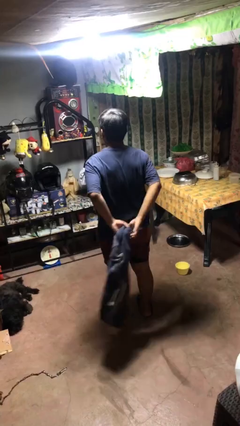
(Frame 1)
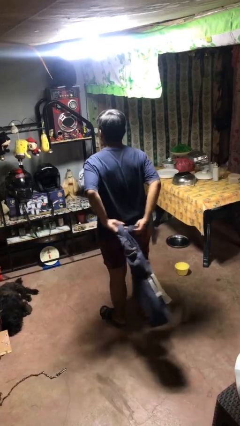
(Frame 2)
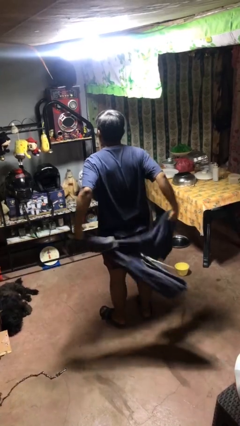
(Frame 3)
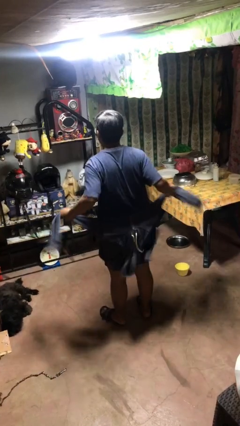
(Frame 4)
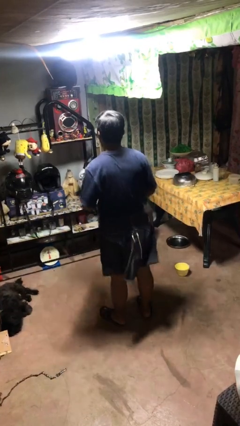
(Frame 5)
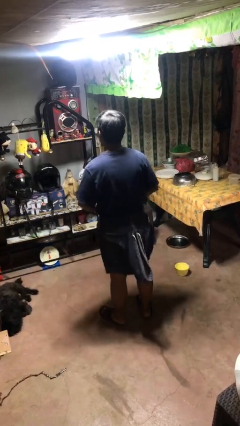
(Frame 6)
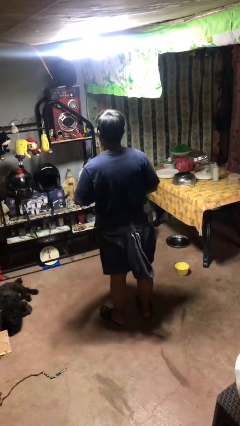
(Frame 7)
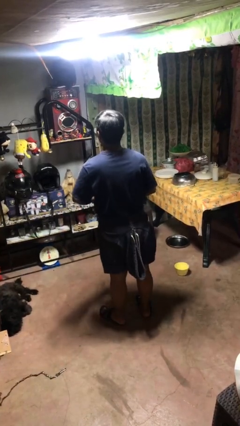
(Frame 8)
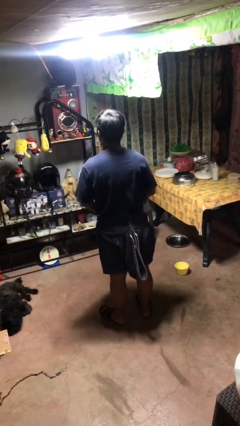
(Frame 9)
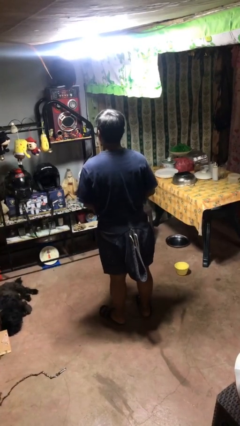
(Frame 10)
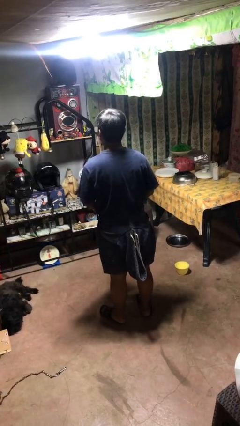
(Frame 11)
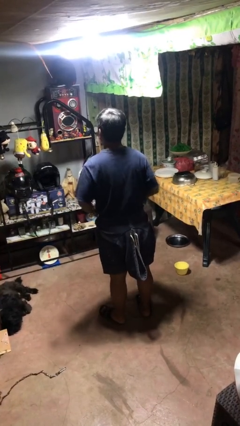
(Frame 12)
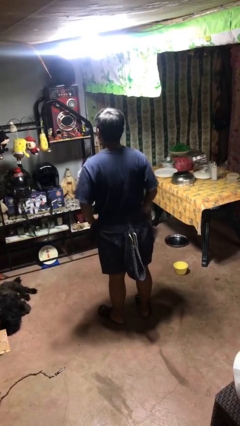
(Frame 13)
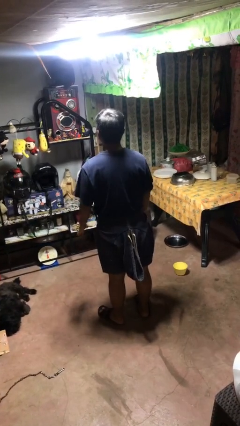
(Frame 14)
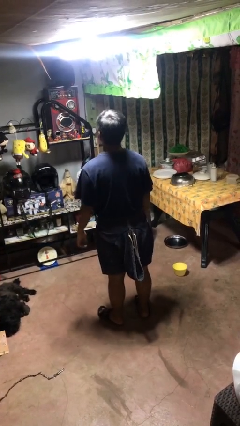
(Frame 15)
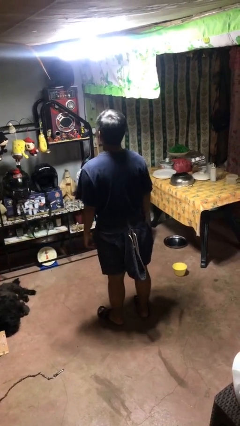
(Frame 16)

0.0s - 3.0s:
person ties jacket around waist

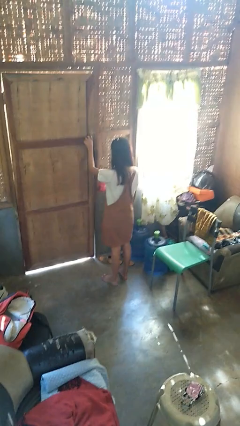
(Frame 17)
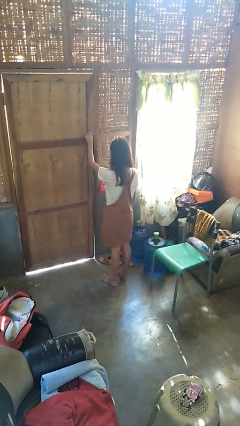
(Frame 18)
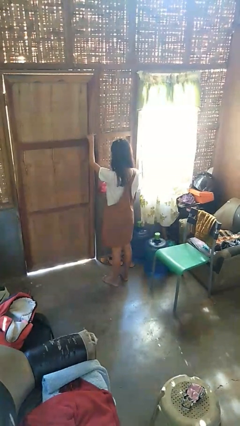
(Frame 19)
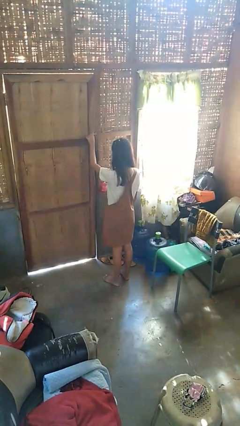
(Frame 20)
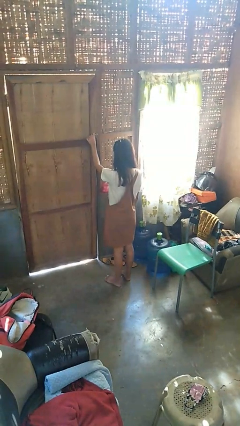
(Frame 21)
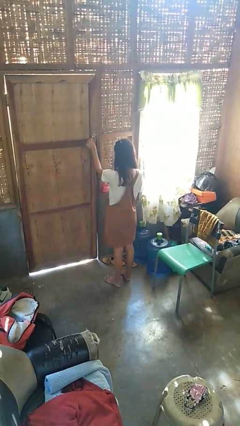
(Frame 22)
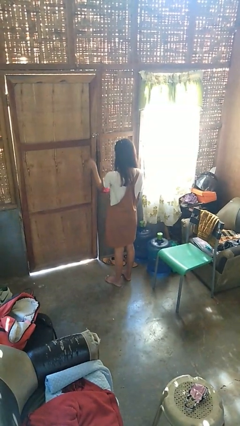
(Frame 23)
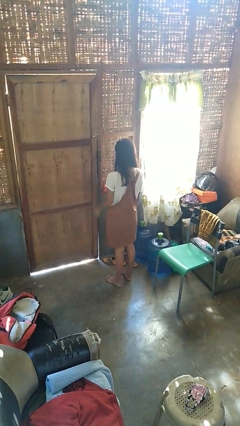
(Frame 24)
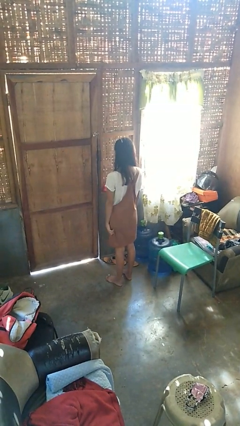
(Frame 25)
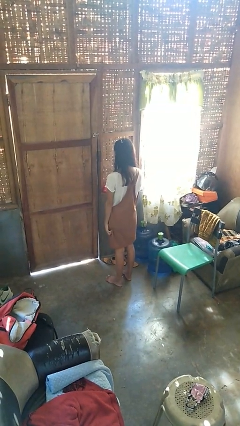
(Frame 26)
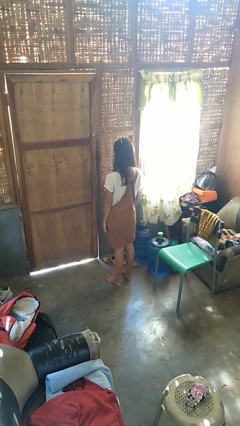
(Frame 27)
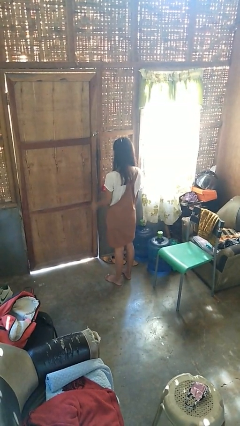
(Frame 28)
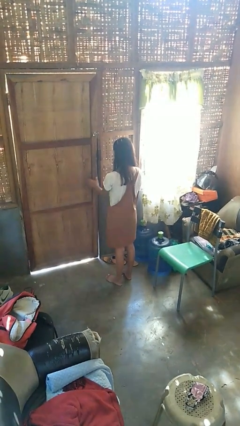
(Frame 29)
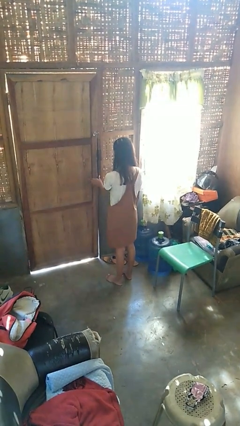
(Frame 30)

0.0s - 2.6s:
person unlocks door with keys

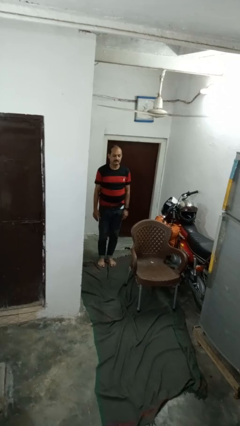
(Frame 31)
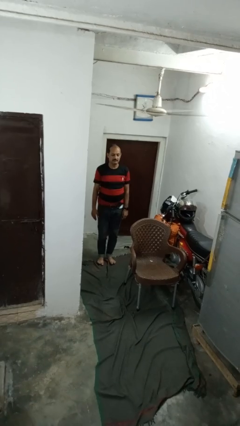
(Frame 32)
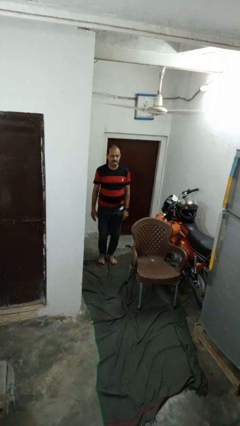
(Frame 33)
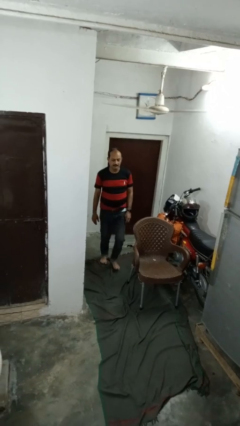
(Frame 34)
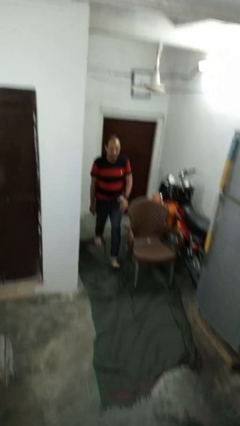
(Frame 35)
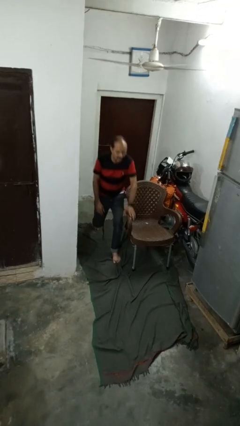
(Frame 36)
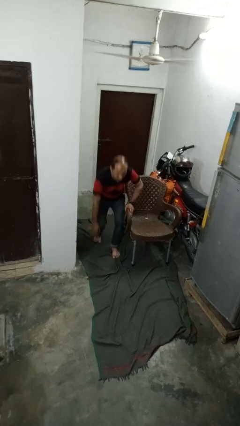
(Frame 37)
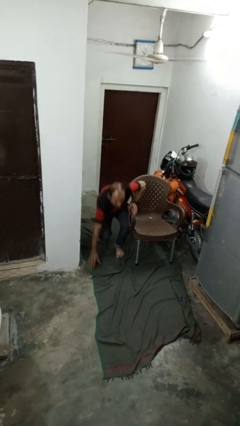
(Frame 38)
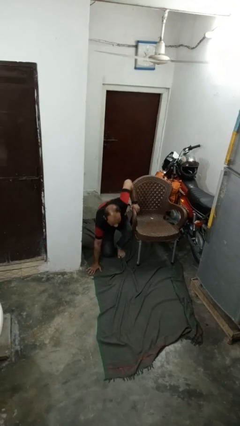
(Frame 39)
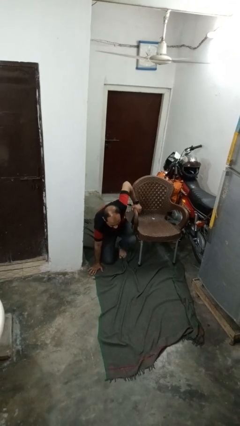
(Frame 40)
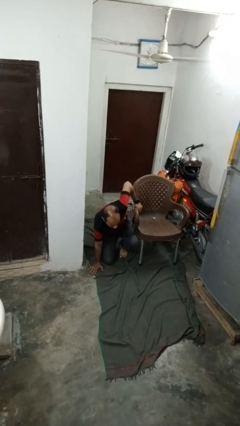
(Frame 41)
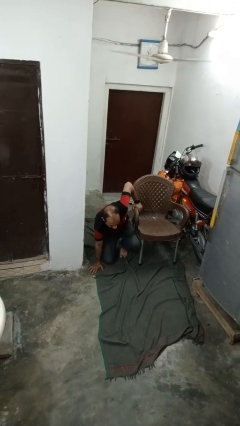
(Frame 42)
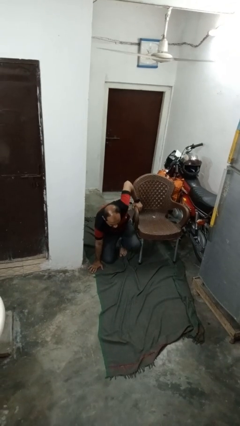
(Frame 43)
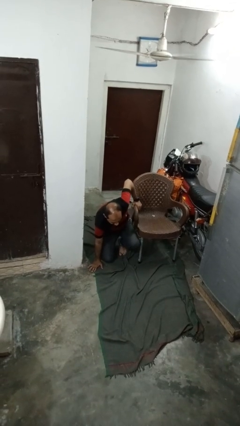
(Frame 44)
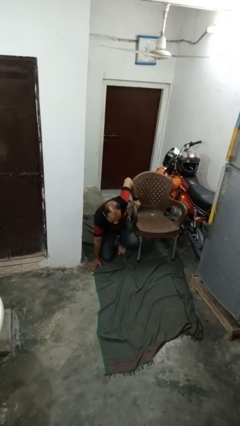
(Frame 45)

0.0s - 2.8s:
person trips on object on floor

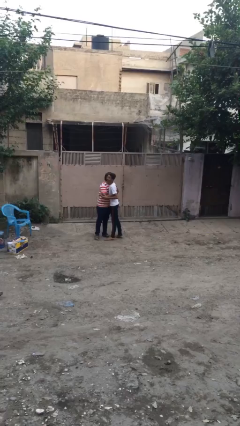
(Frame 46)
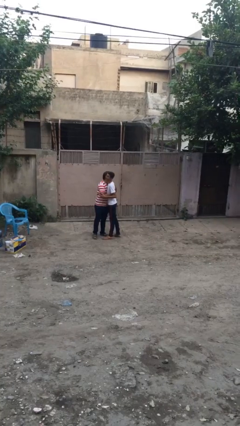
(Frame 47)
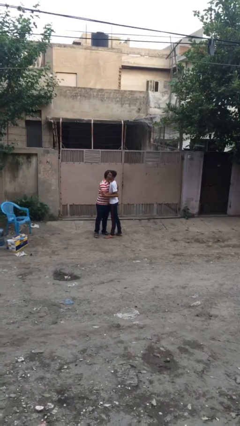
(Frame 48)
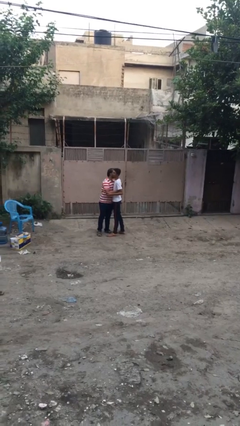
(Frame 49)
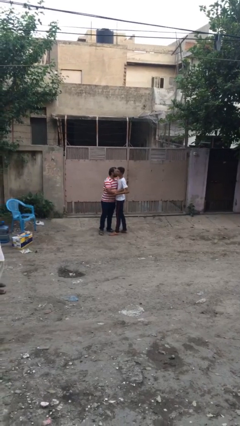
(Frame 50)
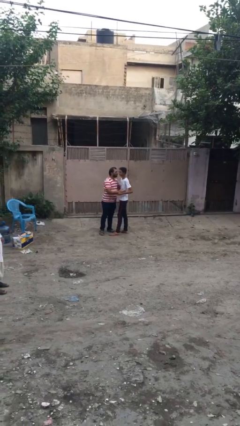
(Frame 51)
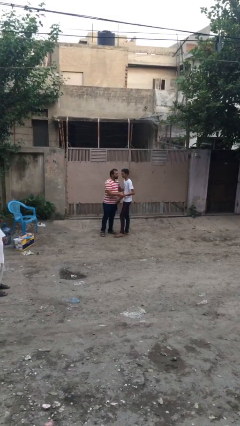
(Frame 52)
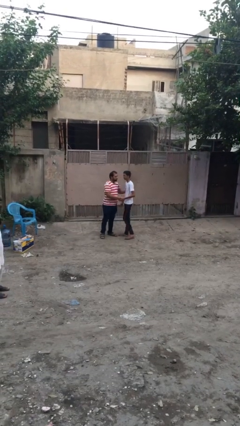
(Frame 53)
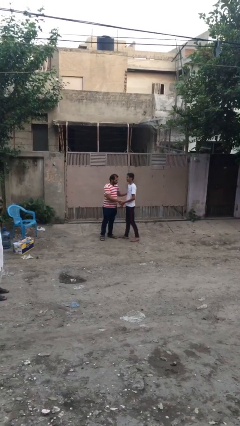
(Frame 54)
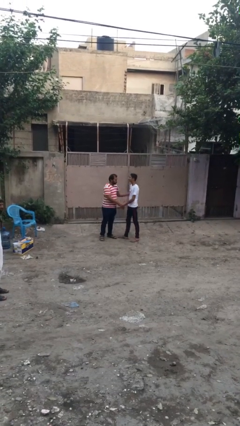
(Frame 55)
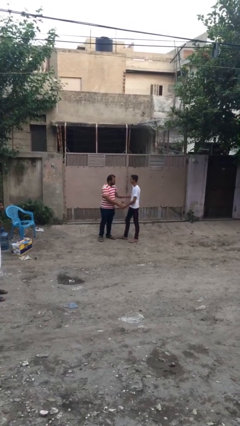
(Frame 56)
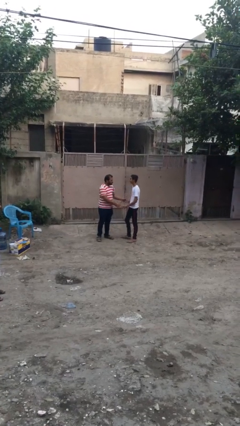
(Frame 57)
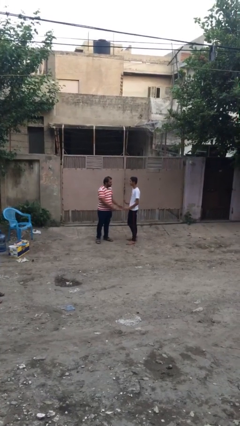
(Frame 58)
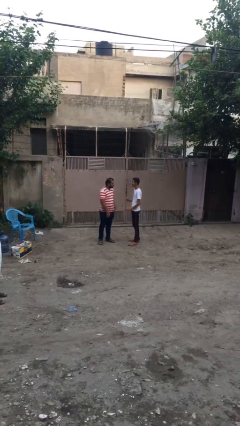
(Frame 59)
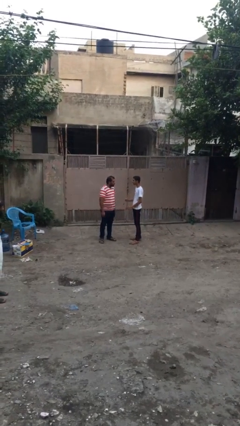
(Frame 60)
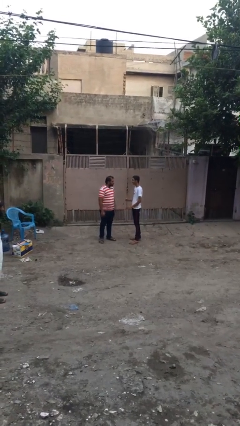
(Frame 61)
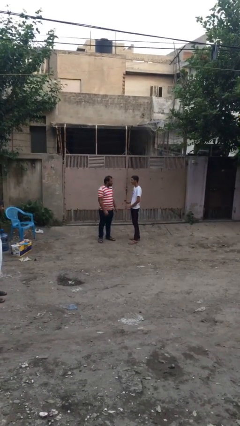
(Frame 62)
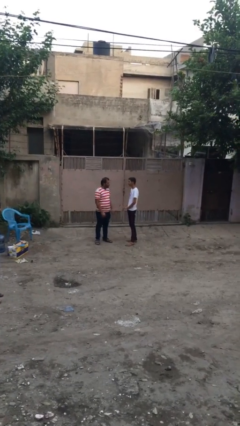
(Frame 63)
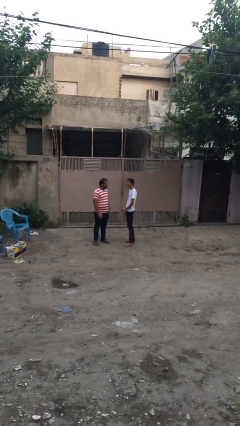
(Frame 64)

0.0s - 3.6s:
person talks to person

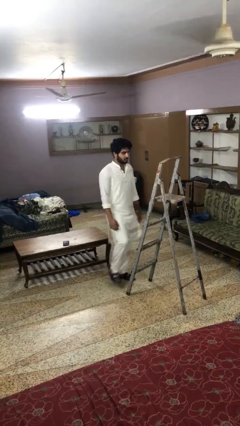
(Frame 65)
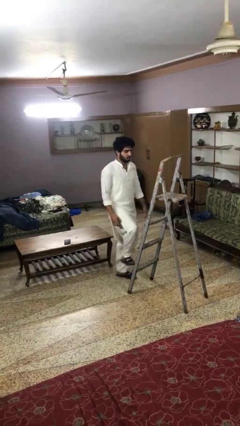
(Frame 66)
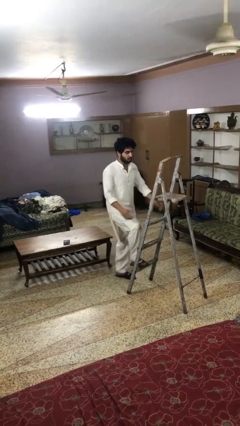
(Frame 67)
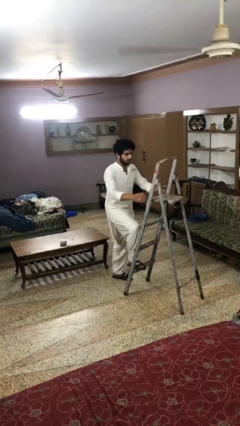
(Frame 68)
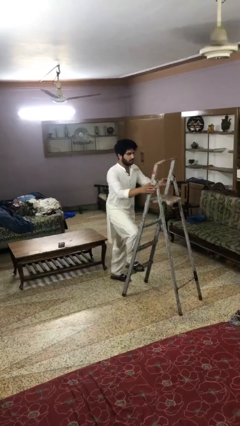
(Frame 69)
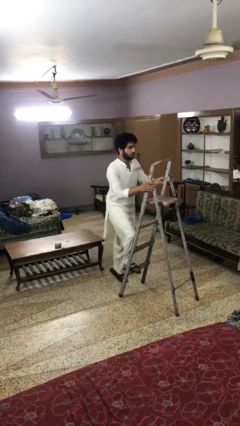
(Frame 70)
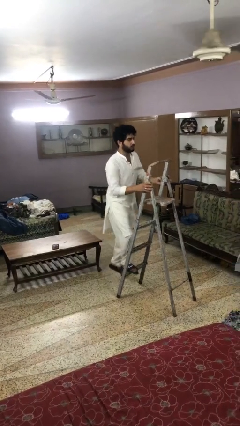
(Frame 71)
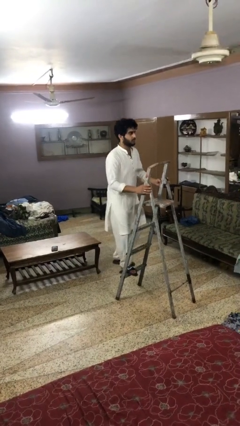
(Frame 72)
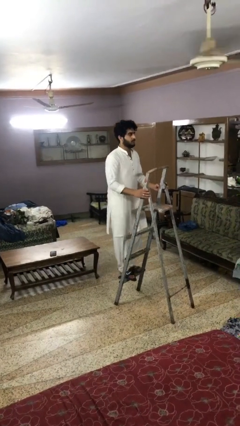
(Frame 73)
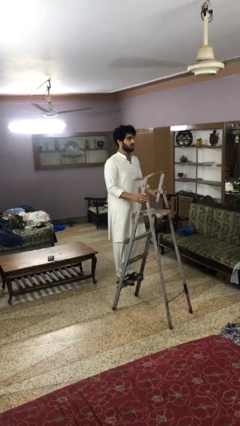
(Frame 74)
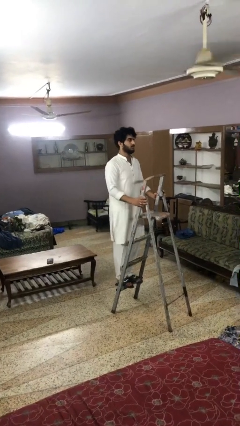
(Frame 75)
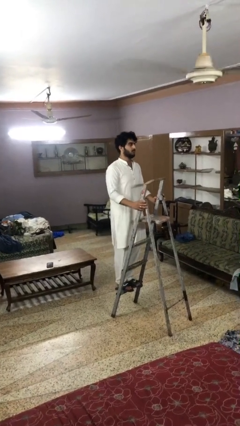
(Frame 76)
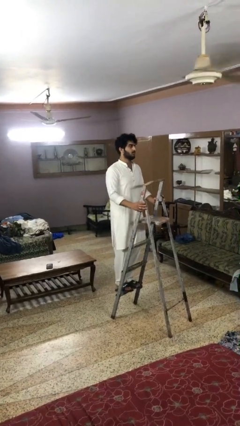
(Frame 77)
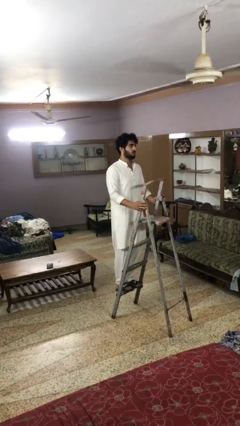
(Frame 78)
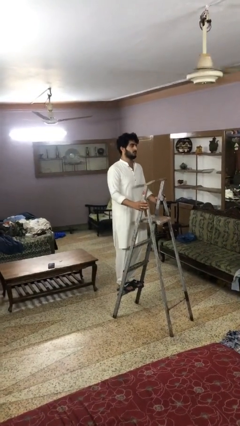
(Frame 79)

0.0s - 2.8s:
person climbs up ladder

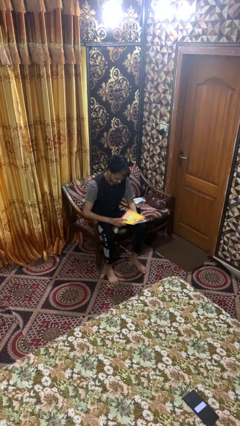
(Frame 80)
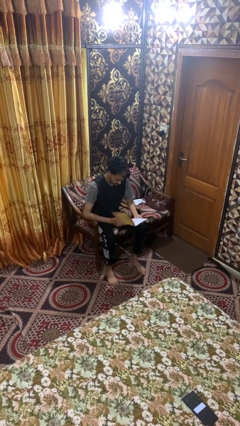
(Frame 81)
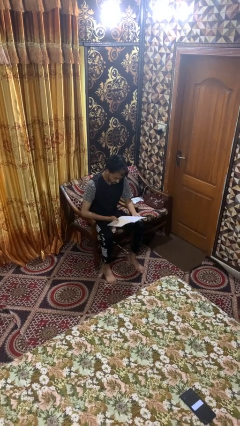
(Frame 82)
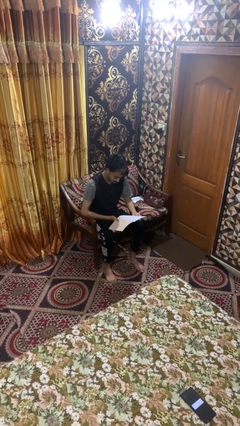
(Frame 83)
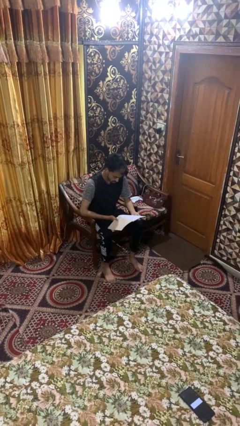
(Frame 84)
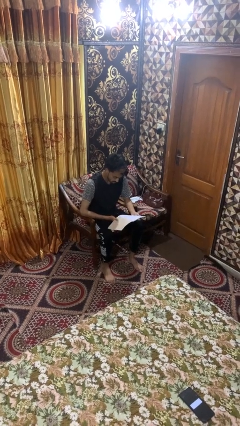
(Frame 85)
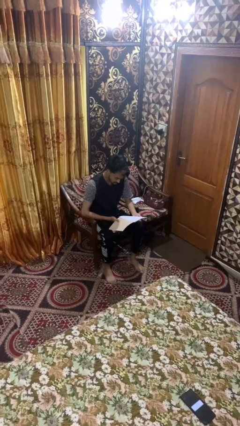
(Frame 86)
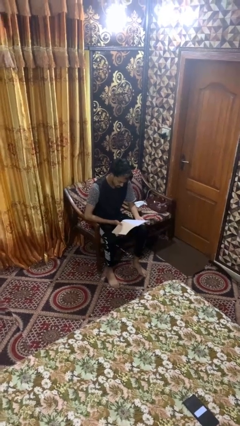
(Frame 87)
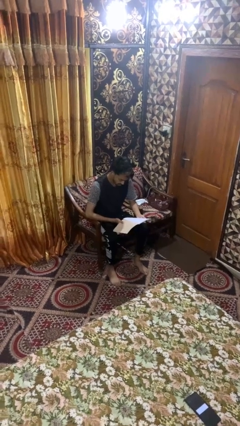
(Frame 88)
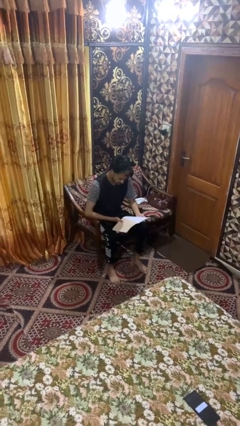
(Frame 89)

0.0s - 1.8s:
person reads magazine

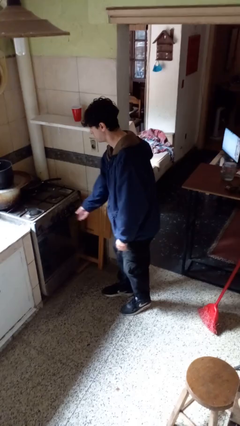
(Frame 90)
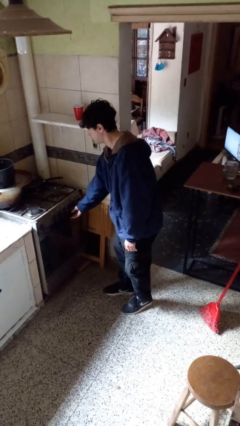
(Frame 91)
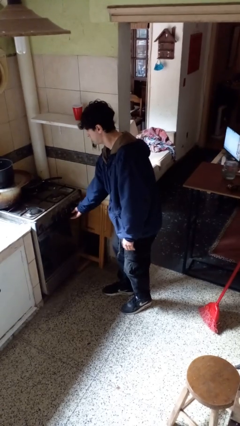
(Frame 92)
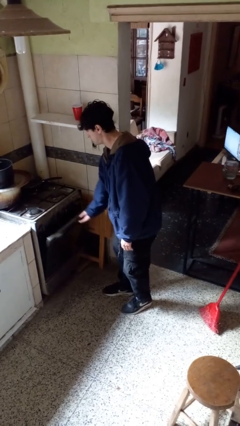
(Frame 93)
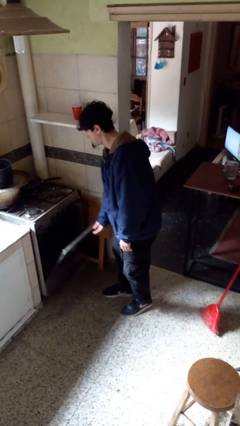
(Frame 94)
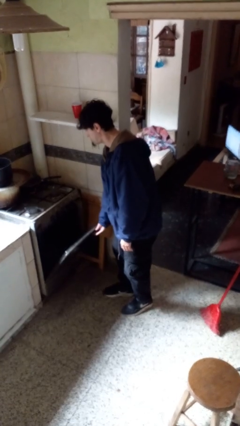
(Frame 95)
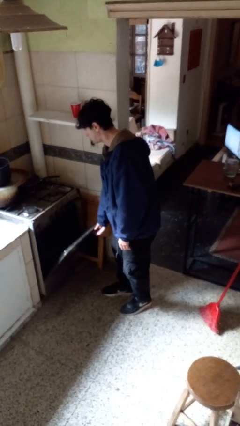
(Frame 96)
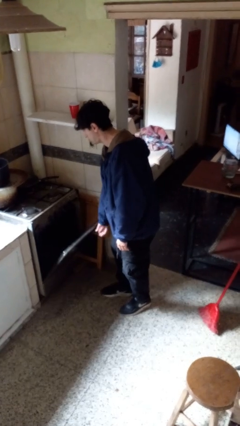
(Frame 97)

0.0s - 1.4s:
person opens oven door
